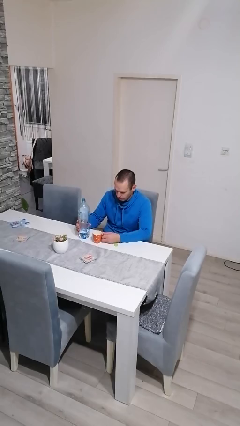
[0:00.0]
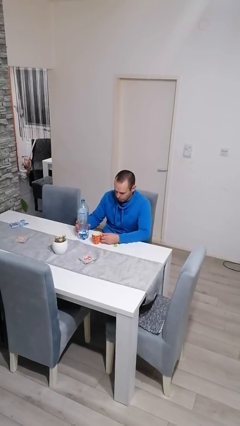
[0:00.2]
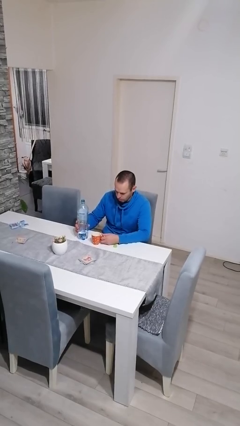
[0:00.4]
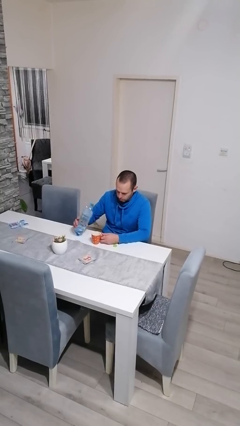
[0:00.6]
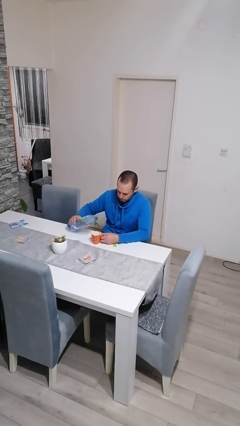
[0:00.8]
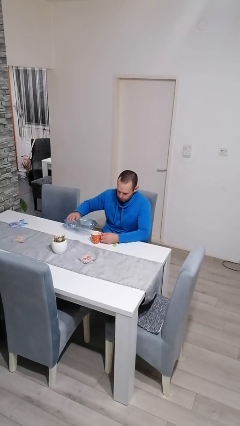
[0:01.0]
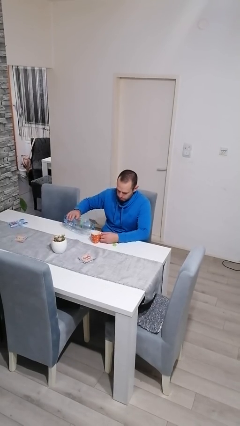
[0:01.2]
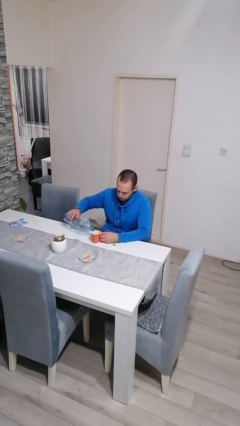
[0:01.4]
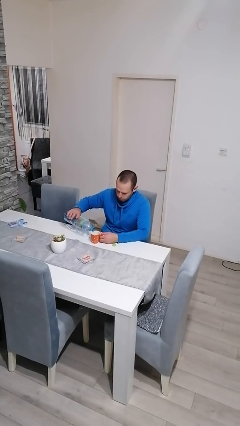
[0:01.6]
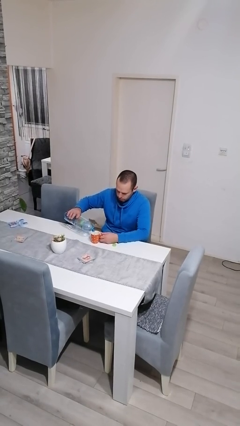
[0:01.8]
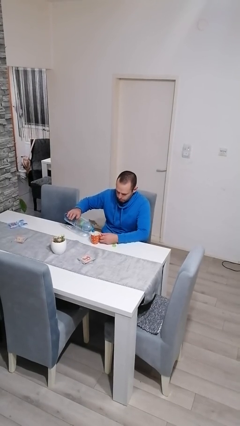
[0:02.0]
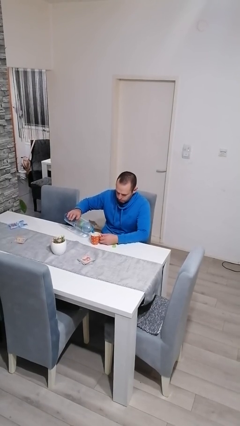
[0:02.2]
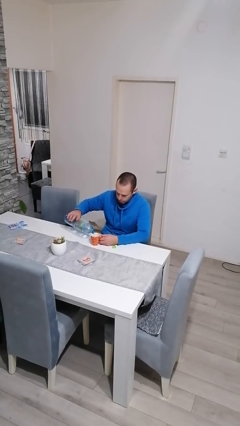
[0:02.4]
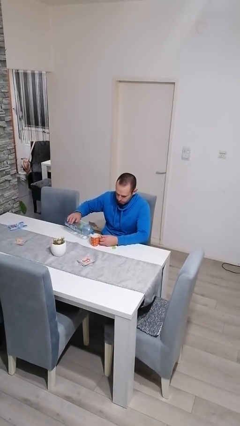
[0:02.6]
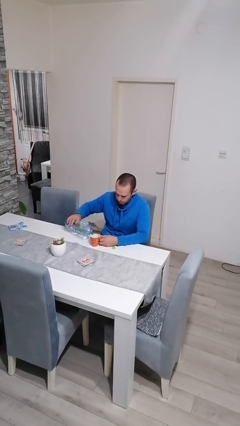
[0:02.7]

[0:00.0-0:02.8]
person pours liquid into cup

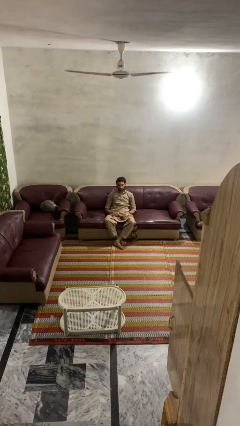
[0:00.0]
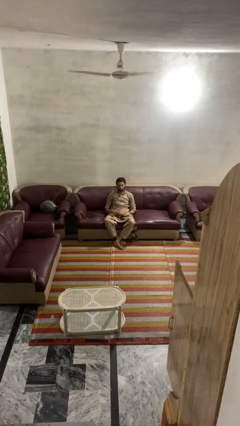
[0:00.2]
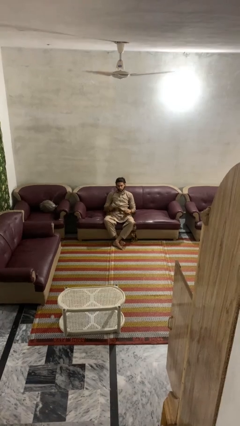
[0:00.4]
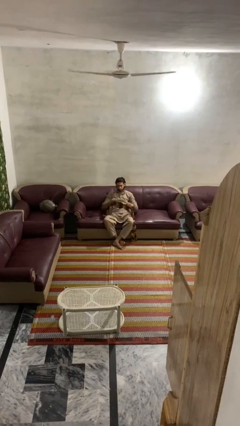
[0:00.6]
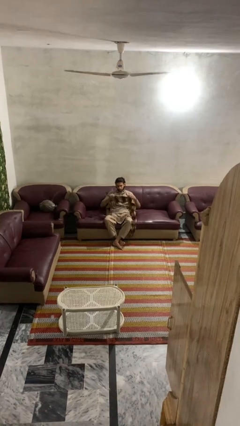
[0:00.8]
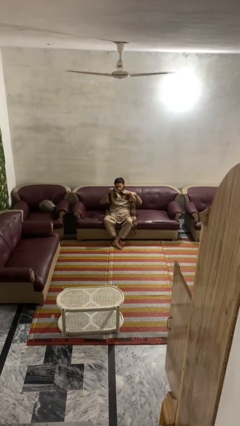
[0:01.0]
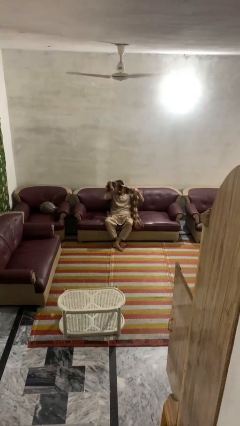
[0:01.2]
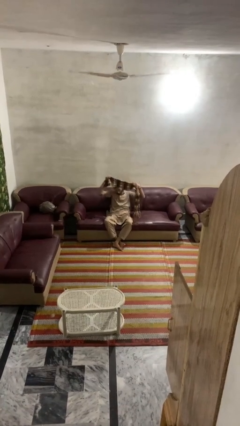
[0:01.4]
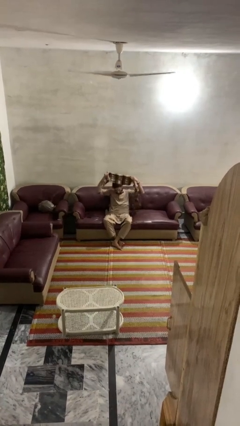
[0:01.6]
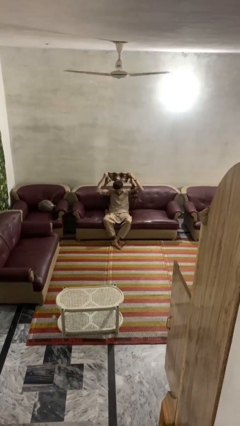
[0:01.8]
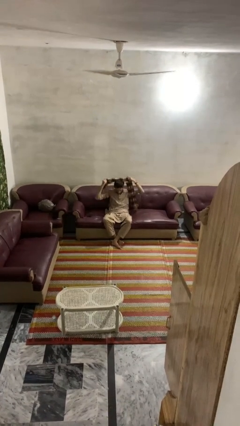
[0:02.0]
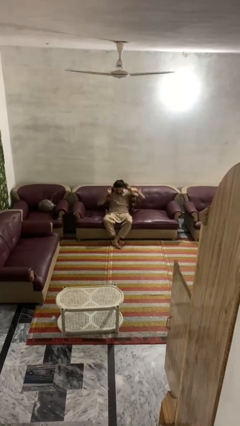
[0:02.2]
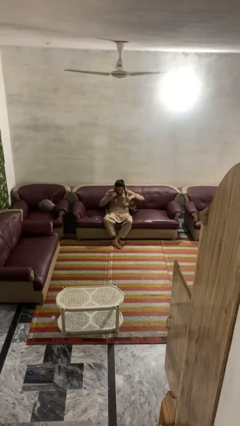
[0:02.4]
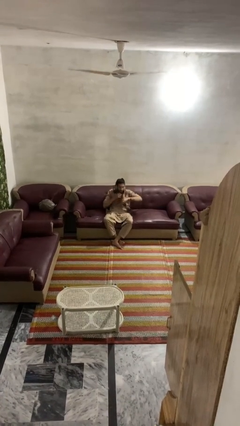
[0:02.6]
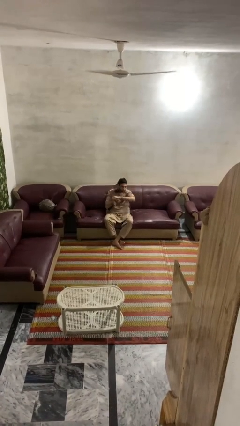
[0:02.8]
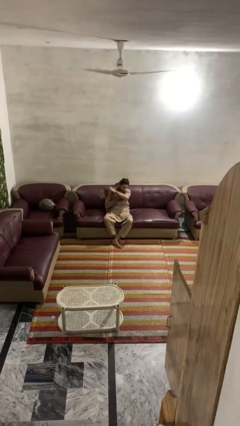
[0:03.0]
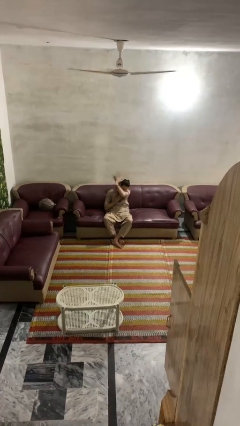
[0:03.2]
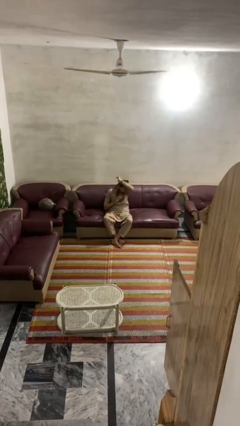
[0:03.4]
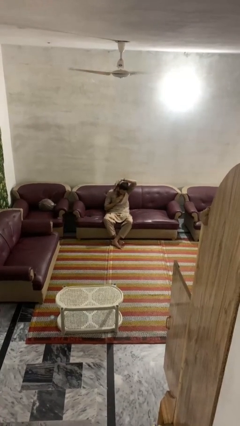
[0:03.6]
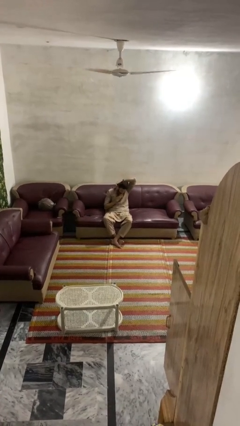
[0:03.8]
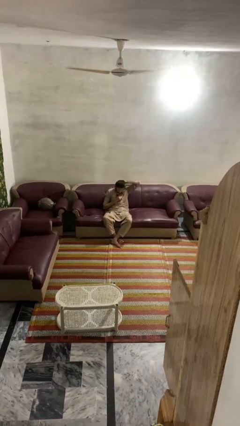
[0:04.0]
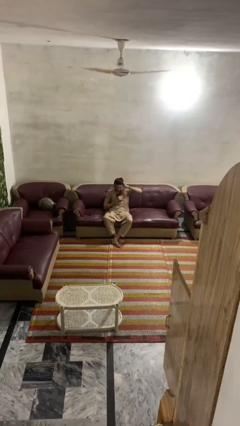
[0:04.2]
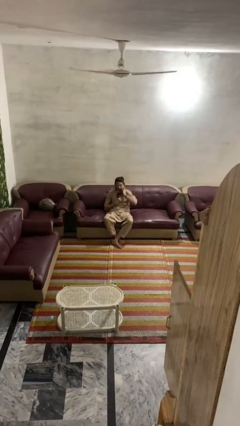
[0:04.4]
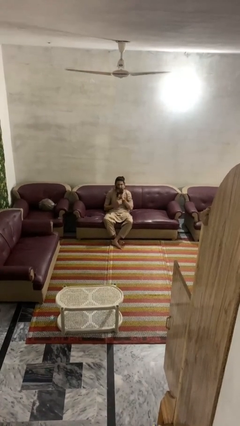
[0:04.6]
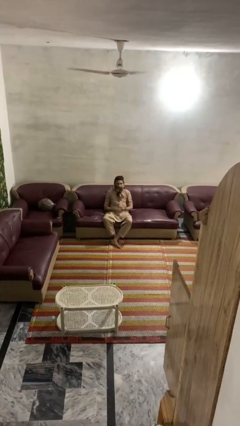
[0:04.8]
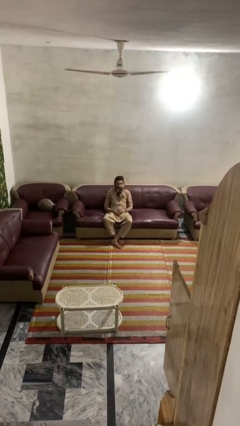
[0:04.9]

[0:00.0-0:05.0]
person puts on scarf

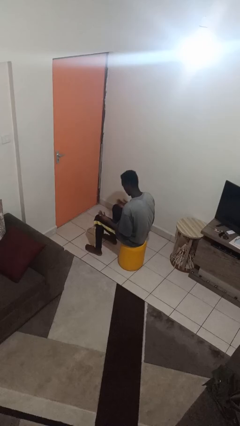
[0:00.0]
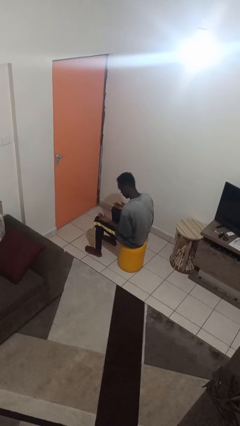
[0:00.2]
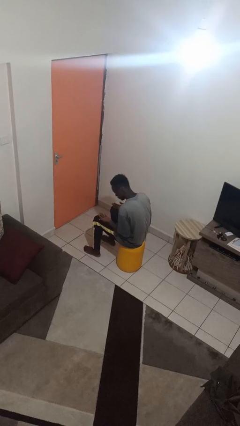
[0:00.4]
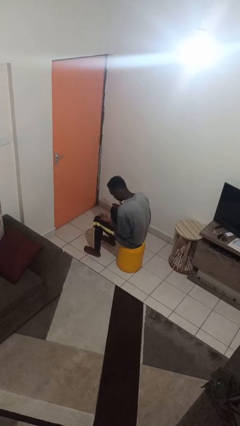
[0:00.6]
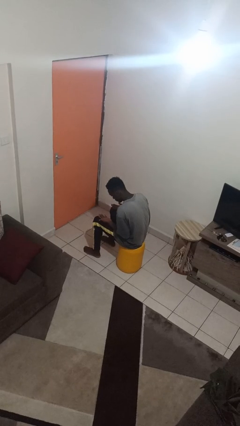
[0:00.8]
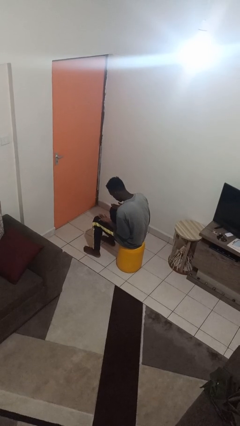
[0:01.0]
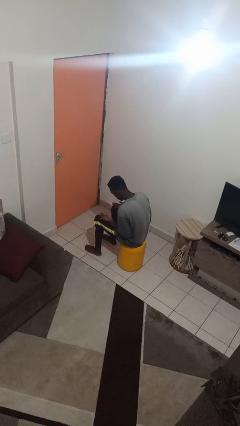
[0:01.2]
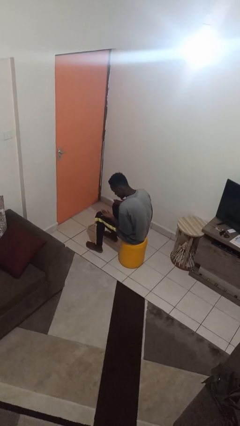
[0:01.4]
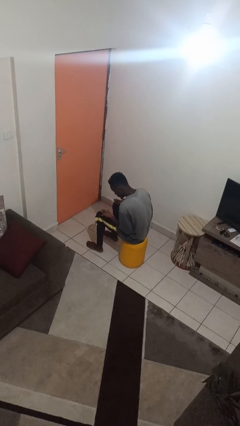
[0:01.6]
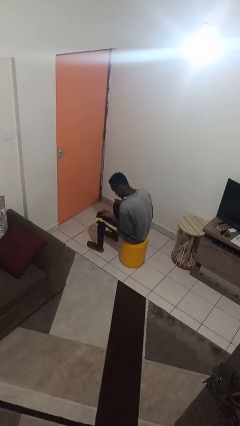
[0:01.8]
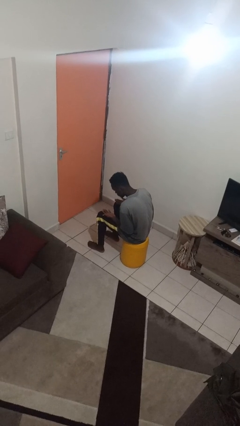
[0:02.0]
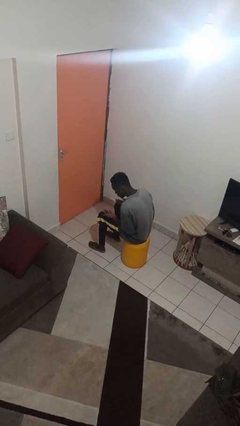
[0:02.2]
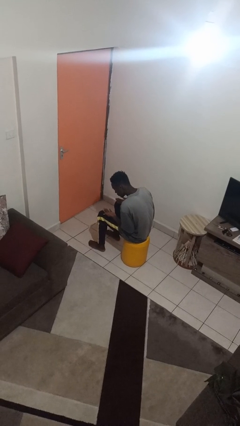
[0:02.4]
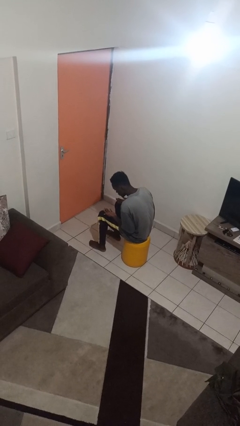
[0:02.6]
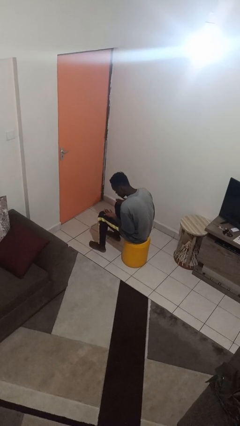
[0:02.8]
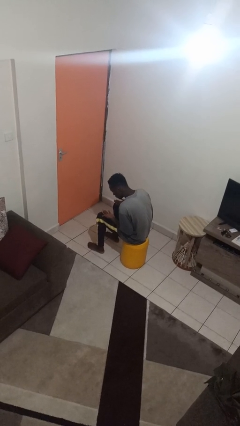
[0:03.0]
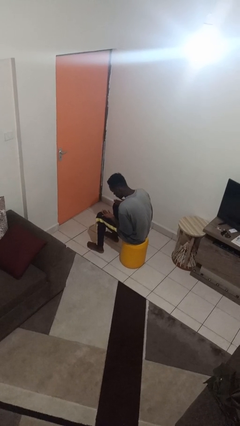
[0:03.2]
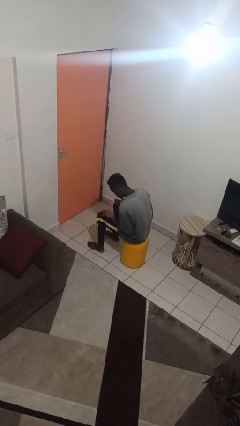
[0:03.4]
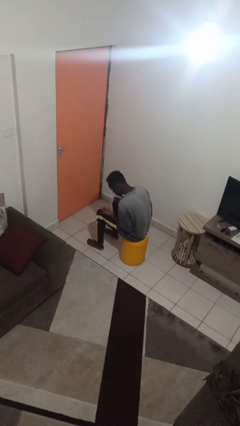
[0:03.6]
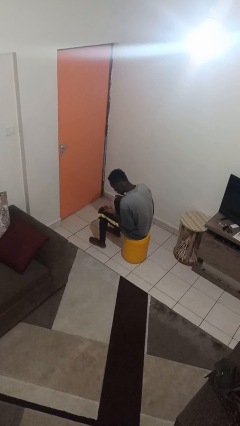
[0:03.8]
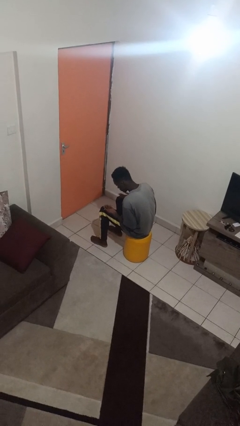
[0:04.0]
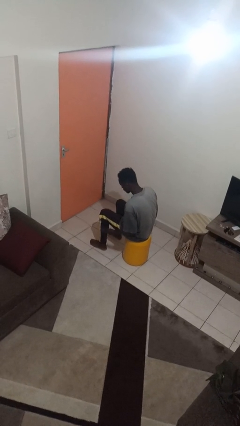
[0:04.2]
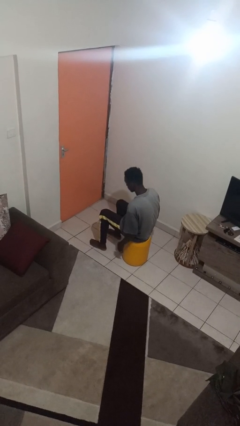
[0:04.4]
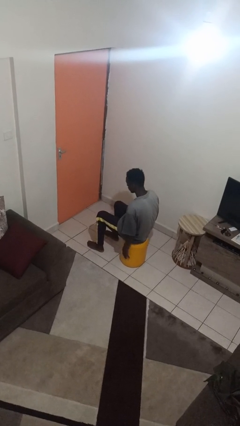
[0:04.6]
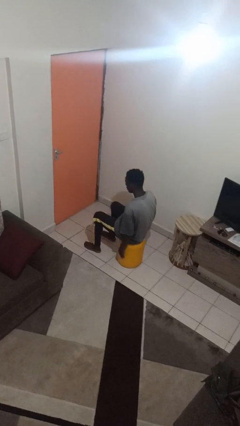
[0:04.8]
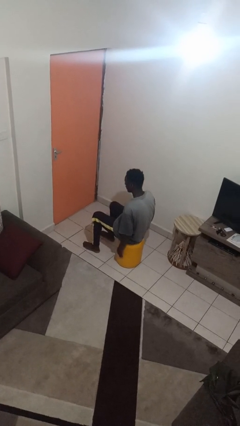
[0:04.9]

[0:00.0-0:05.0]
person looks at hands in lap

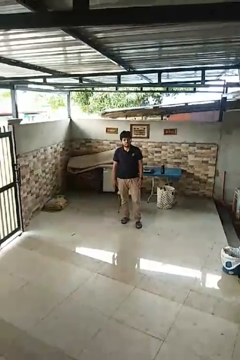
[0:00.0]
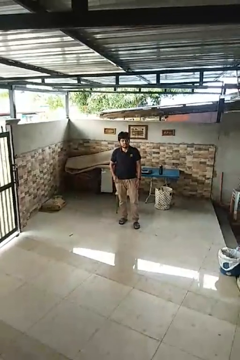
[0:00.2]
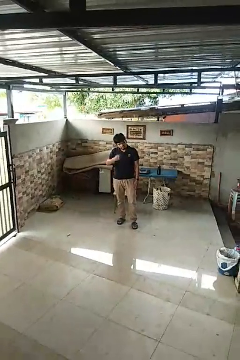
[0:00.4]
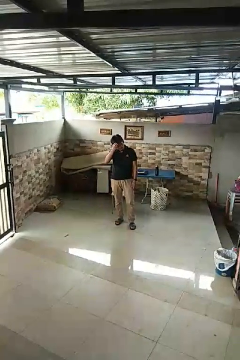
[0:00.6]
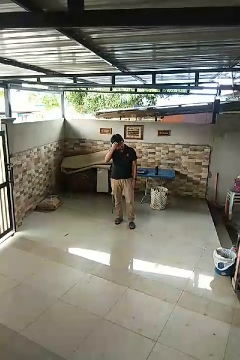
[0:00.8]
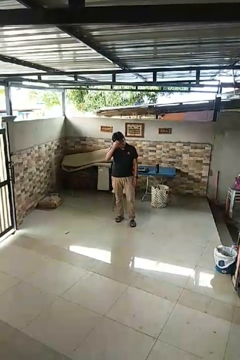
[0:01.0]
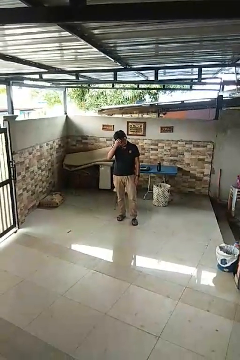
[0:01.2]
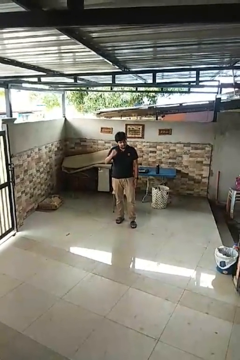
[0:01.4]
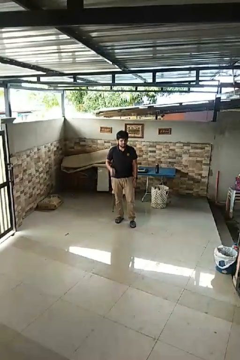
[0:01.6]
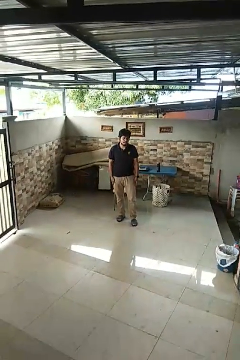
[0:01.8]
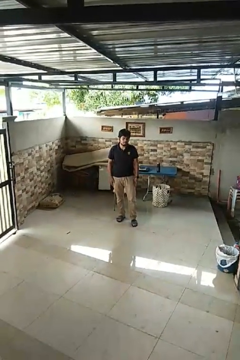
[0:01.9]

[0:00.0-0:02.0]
person scratches face

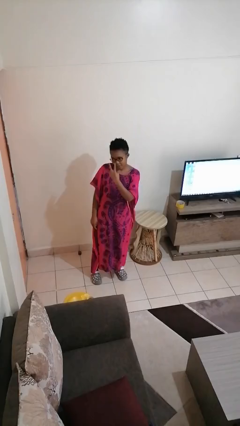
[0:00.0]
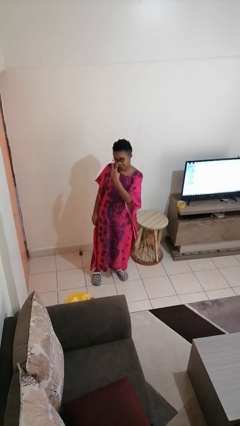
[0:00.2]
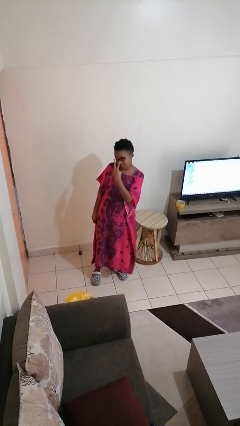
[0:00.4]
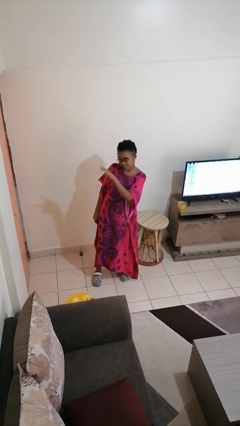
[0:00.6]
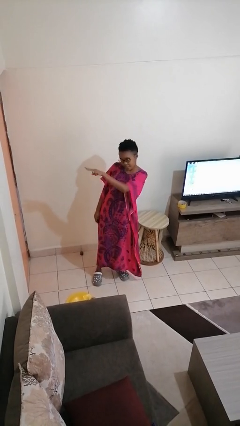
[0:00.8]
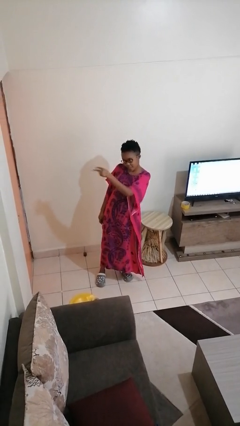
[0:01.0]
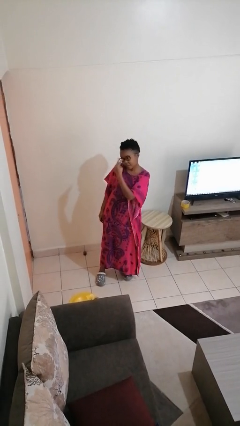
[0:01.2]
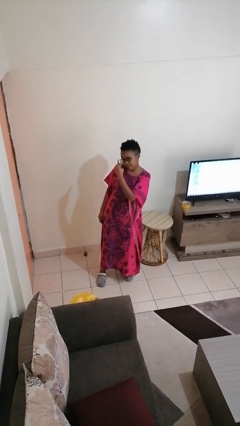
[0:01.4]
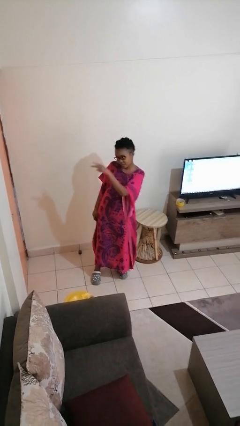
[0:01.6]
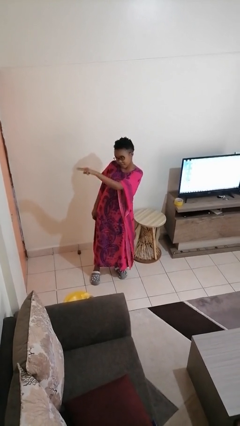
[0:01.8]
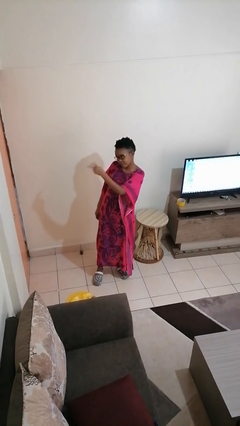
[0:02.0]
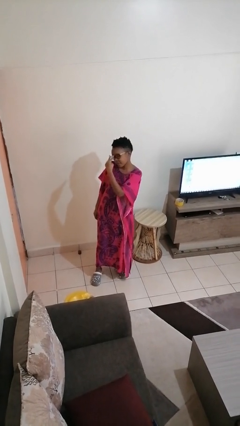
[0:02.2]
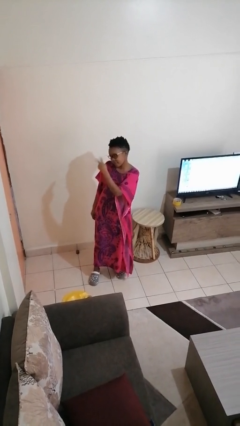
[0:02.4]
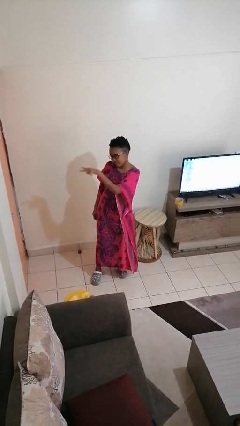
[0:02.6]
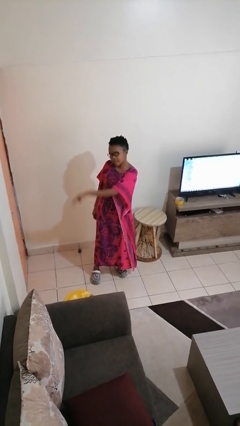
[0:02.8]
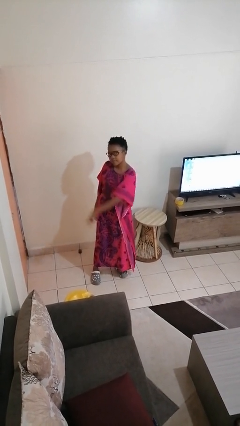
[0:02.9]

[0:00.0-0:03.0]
person gestures watch closely
